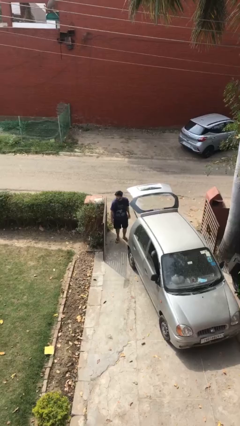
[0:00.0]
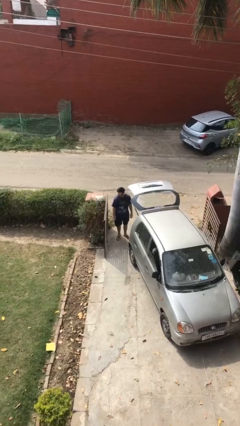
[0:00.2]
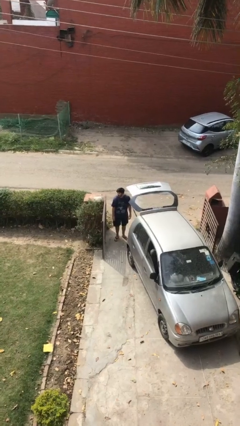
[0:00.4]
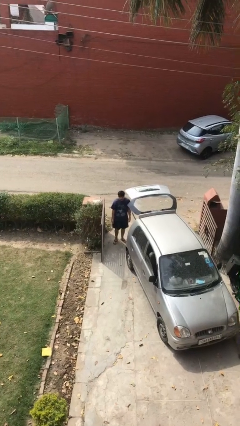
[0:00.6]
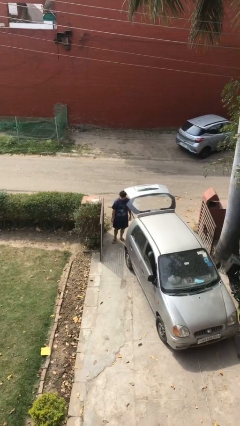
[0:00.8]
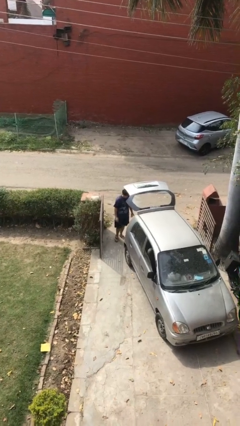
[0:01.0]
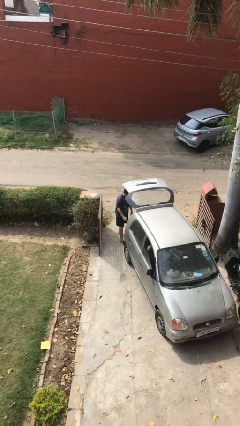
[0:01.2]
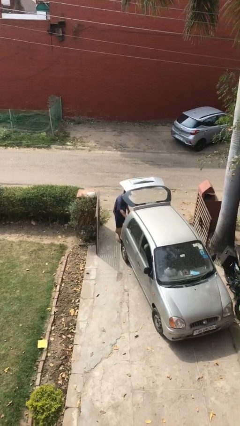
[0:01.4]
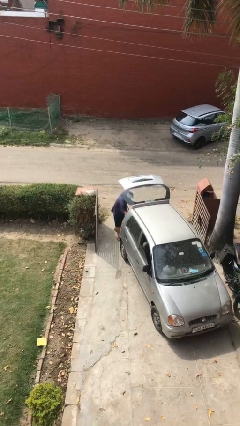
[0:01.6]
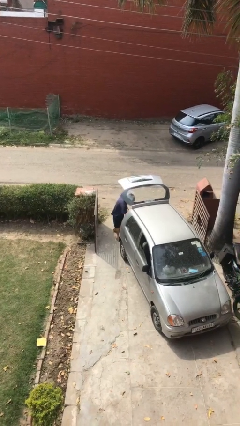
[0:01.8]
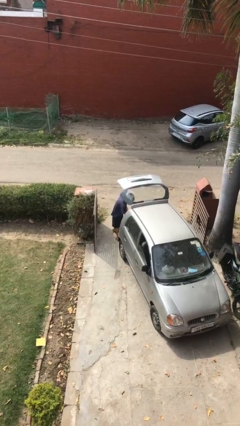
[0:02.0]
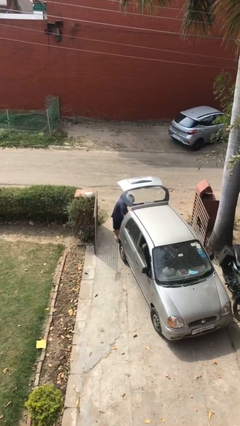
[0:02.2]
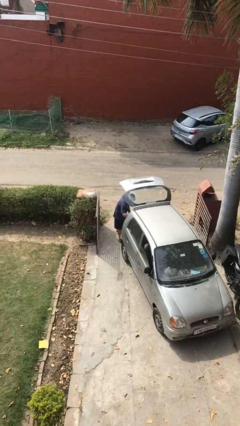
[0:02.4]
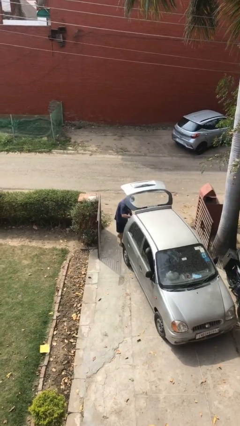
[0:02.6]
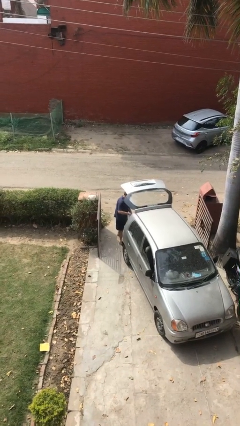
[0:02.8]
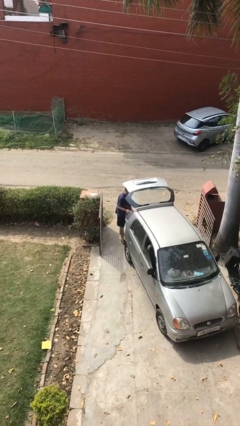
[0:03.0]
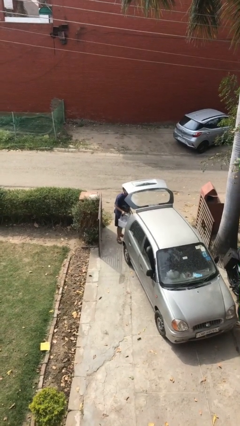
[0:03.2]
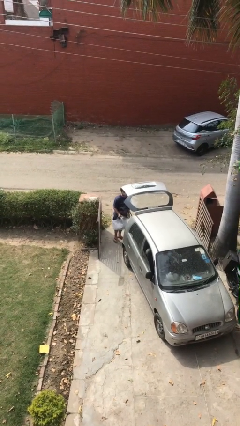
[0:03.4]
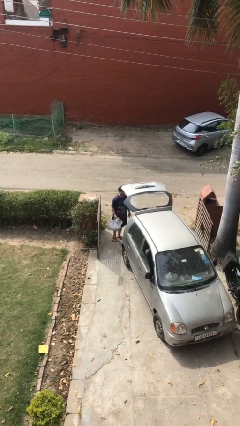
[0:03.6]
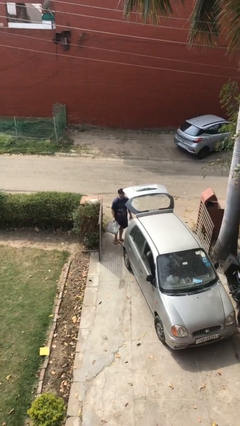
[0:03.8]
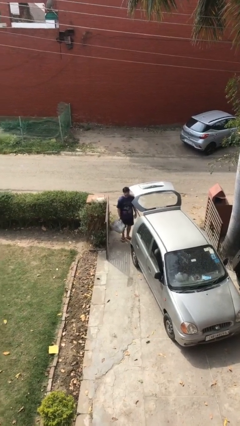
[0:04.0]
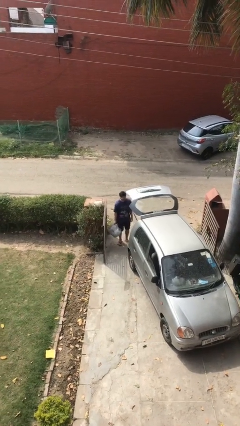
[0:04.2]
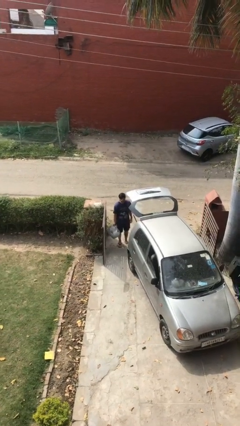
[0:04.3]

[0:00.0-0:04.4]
person unloads car

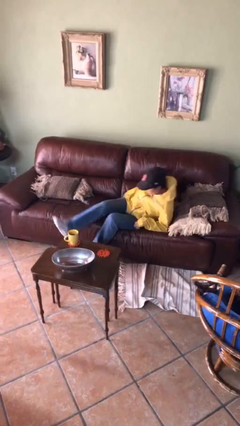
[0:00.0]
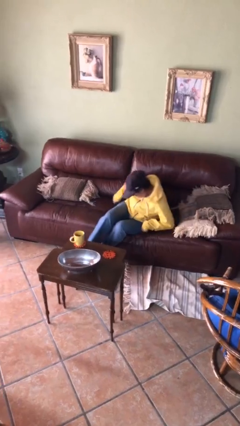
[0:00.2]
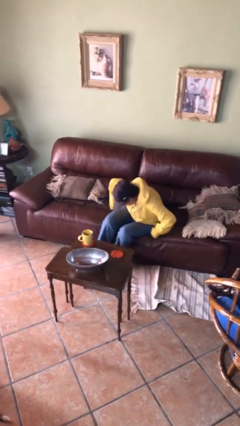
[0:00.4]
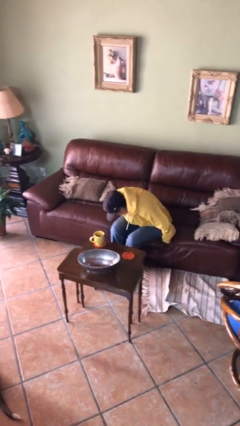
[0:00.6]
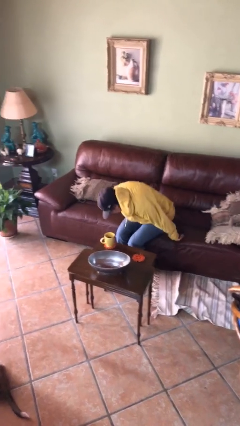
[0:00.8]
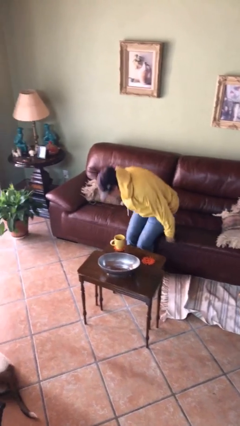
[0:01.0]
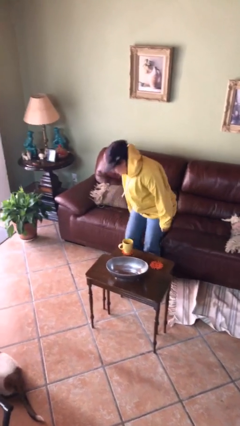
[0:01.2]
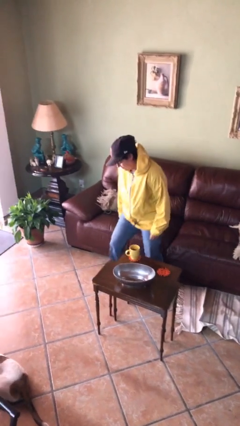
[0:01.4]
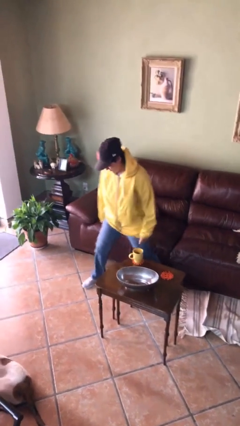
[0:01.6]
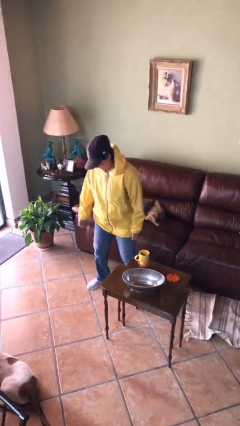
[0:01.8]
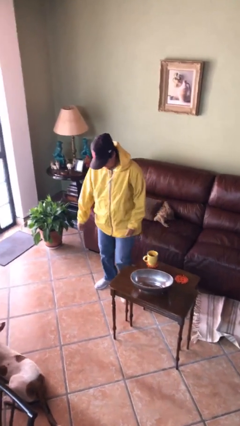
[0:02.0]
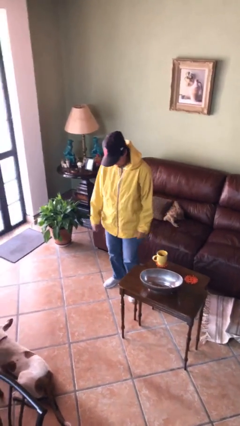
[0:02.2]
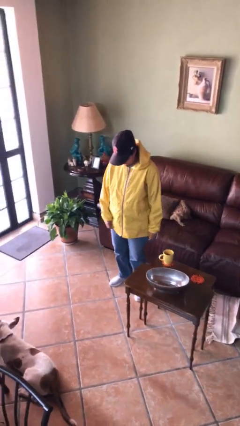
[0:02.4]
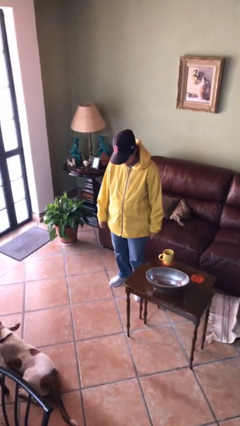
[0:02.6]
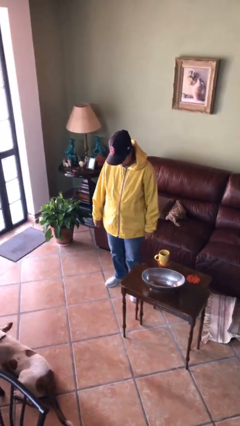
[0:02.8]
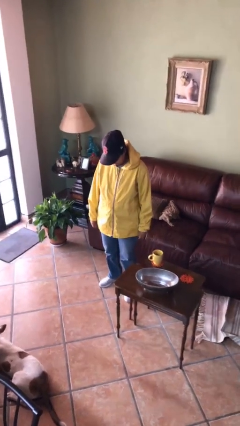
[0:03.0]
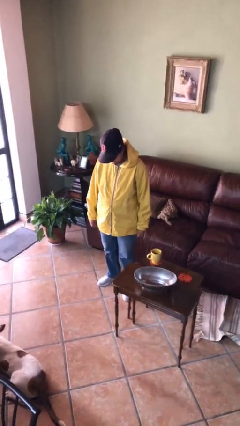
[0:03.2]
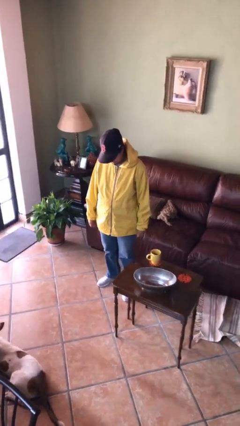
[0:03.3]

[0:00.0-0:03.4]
person stands up

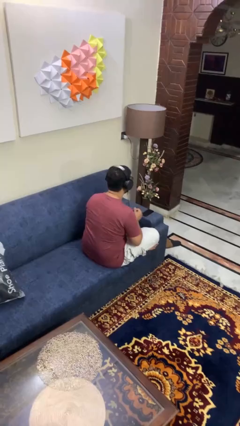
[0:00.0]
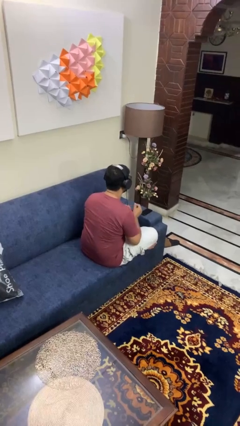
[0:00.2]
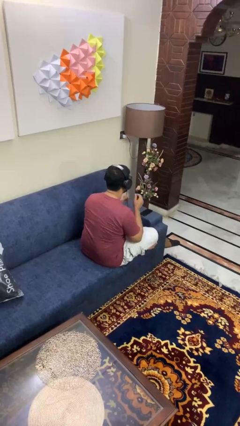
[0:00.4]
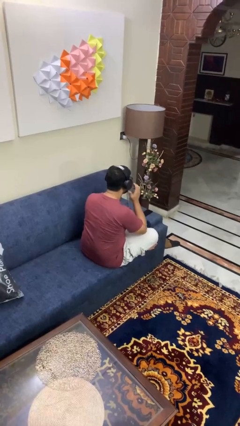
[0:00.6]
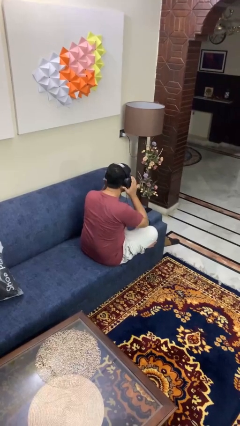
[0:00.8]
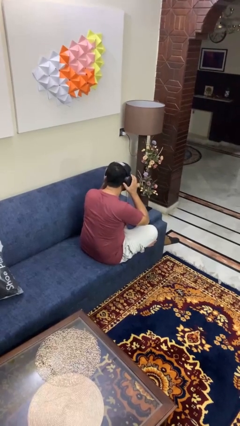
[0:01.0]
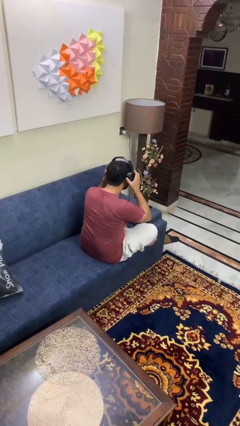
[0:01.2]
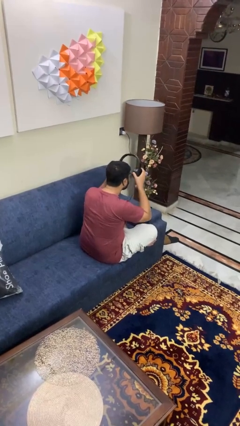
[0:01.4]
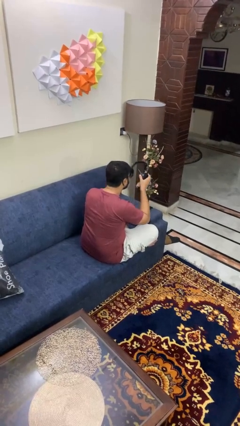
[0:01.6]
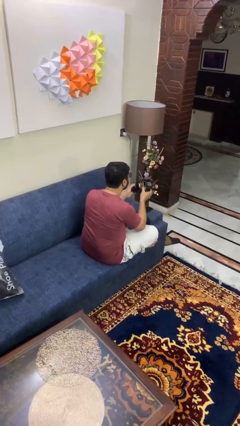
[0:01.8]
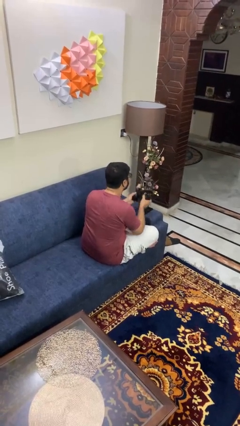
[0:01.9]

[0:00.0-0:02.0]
person takes off headphones

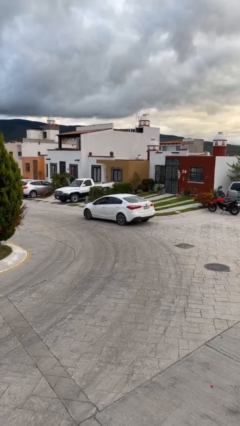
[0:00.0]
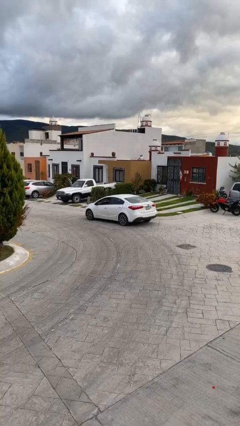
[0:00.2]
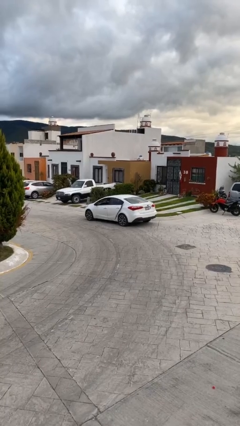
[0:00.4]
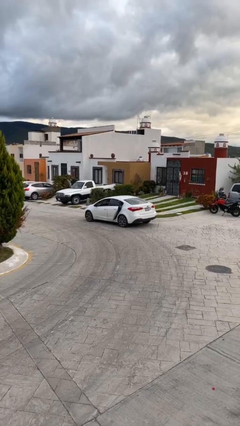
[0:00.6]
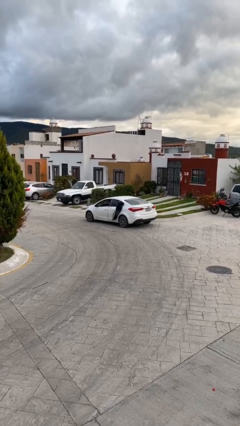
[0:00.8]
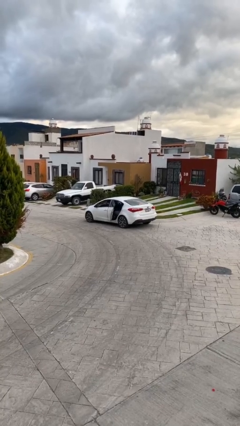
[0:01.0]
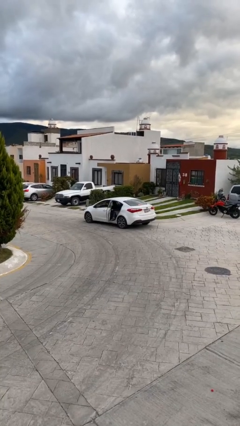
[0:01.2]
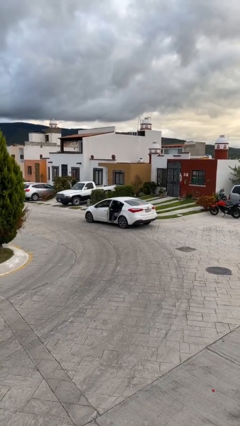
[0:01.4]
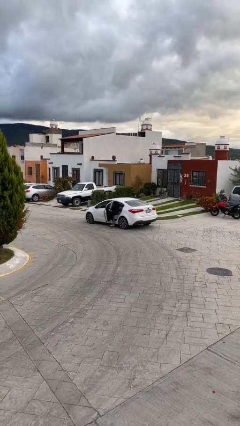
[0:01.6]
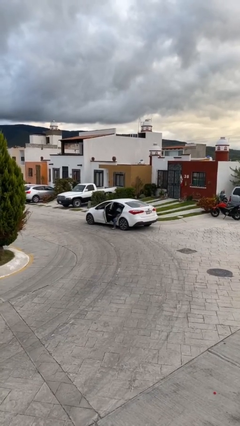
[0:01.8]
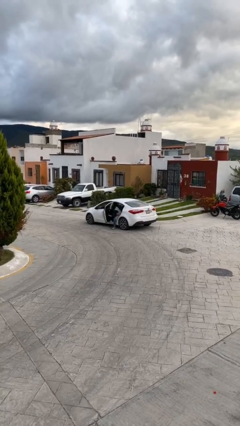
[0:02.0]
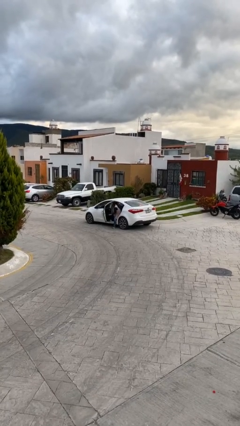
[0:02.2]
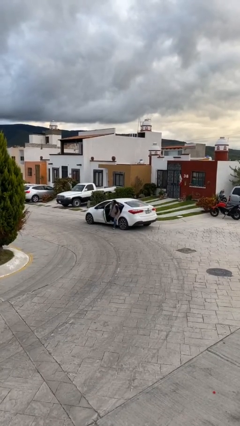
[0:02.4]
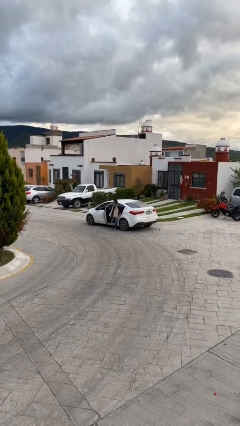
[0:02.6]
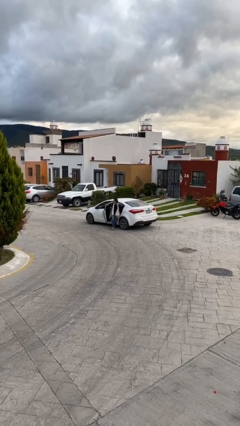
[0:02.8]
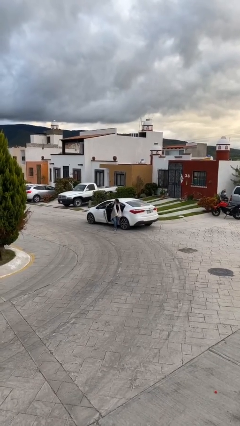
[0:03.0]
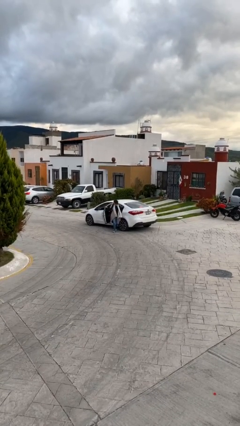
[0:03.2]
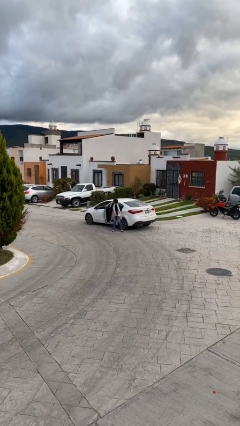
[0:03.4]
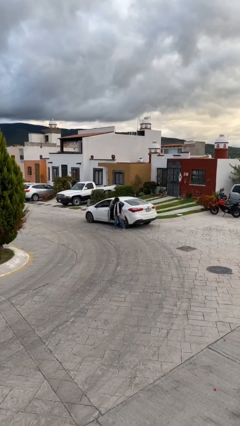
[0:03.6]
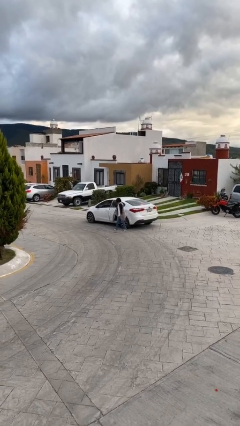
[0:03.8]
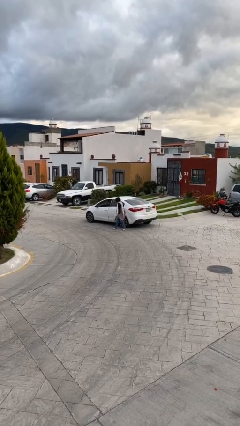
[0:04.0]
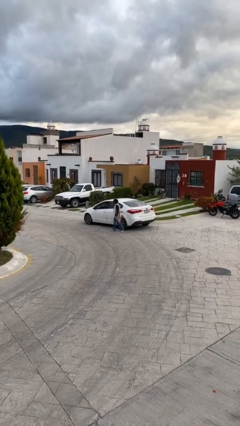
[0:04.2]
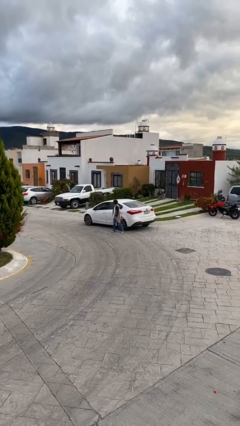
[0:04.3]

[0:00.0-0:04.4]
car drops off person

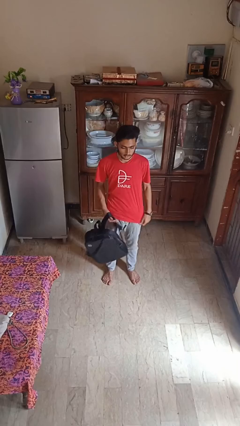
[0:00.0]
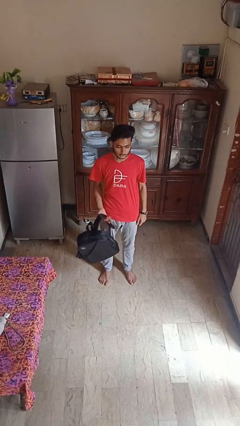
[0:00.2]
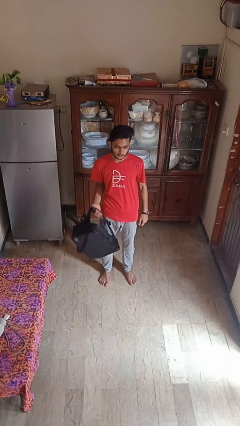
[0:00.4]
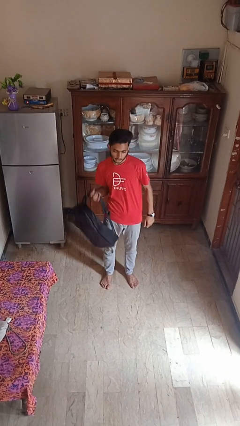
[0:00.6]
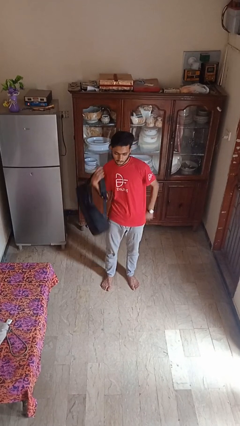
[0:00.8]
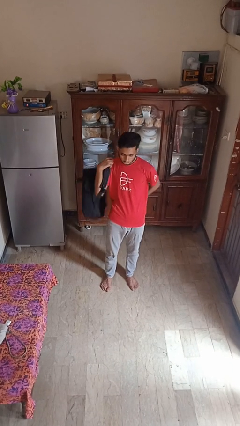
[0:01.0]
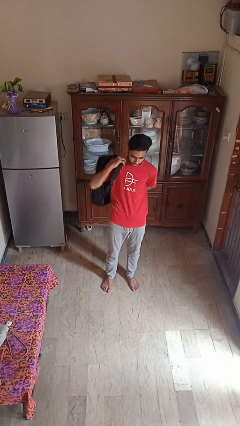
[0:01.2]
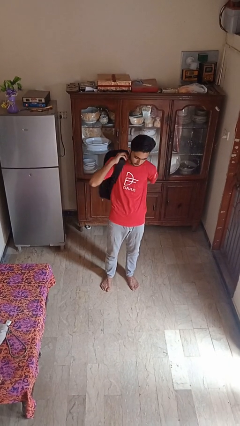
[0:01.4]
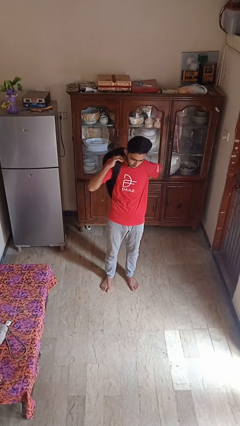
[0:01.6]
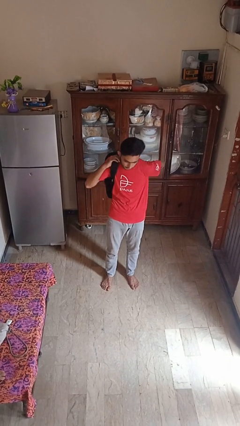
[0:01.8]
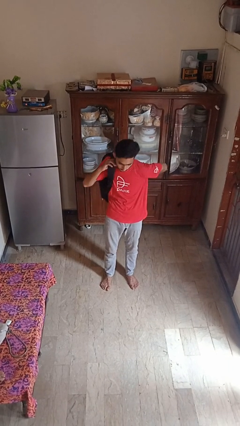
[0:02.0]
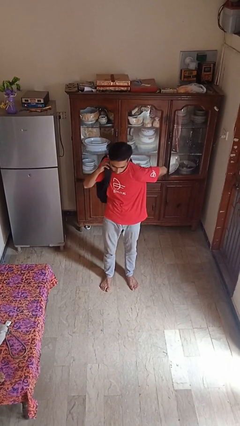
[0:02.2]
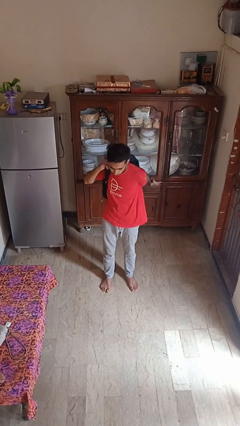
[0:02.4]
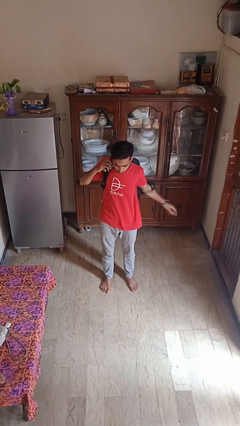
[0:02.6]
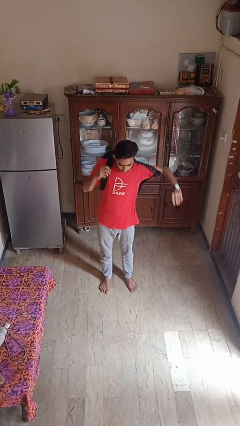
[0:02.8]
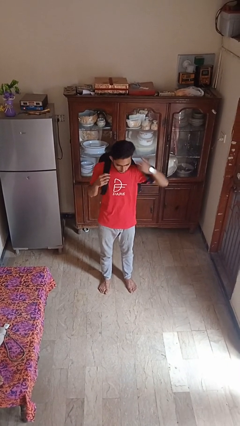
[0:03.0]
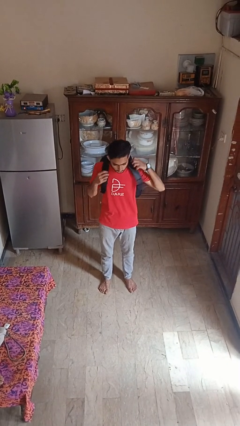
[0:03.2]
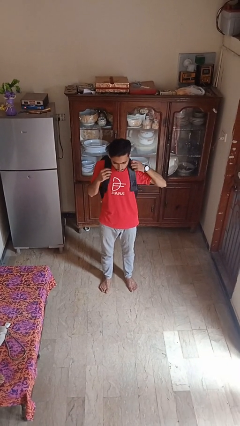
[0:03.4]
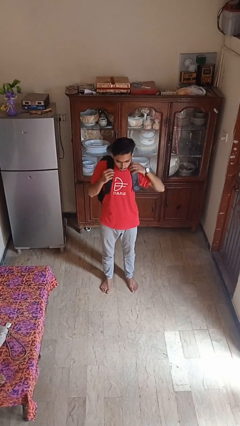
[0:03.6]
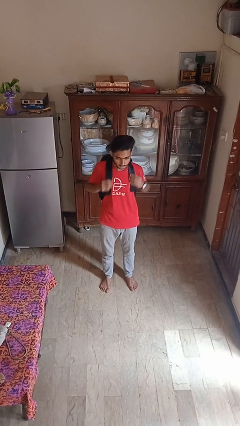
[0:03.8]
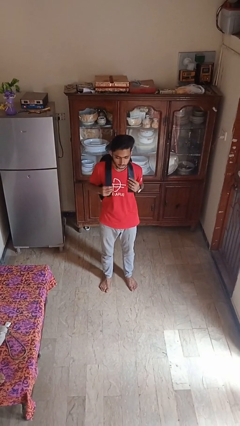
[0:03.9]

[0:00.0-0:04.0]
person puts on backpack
